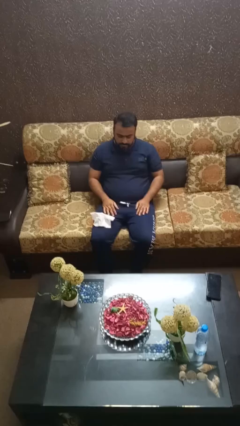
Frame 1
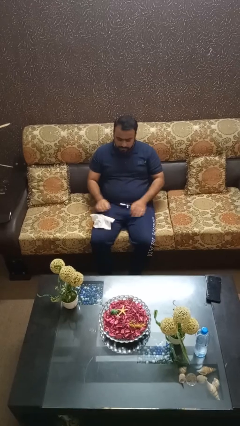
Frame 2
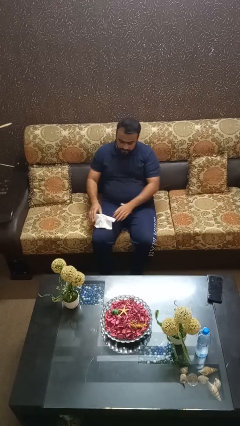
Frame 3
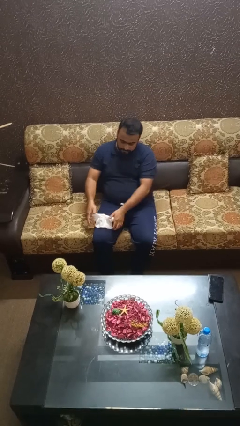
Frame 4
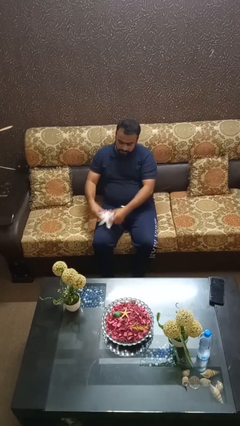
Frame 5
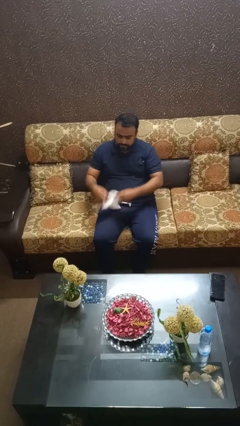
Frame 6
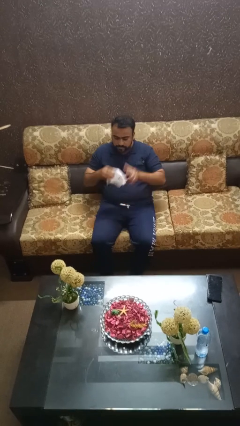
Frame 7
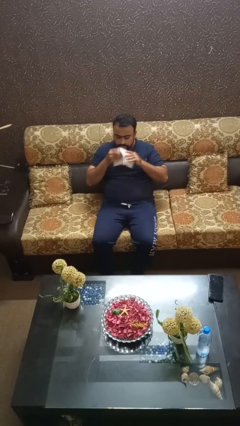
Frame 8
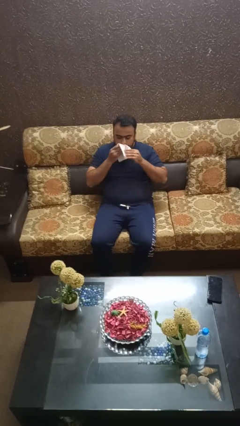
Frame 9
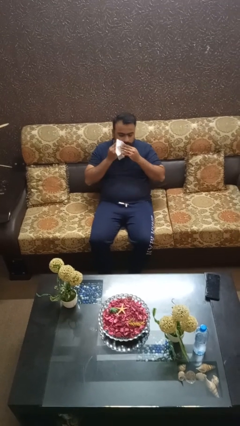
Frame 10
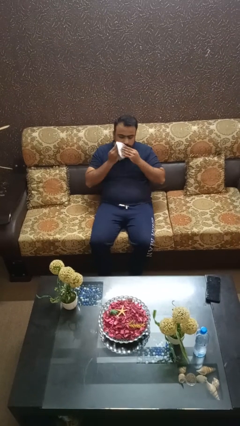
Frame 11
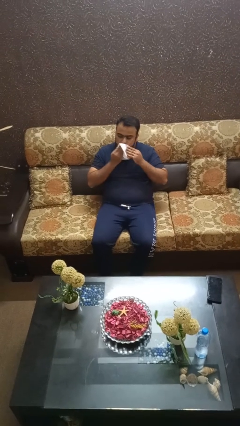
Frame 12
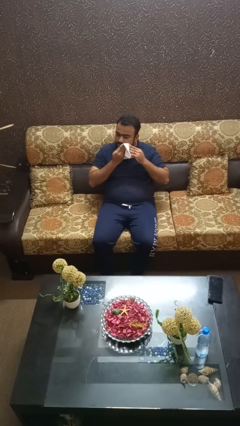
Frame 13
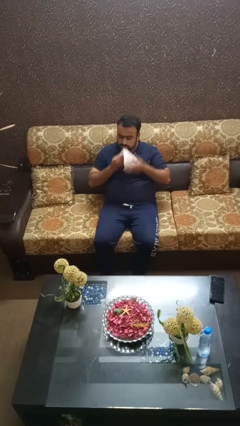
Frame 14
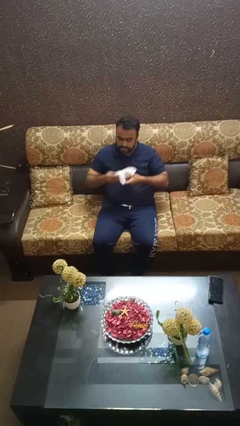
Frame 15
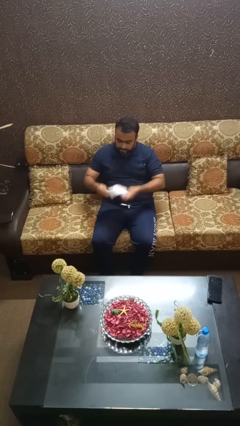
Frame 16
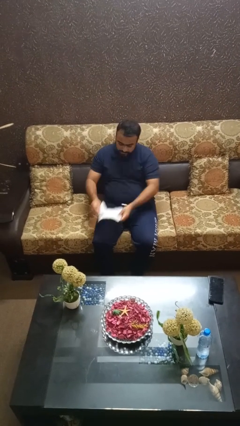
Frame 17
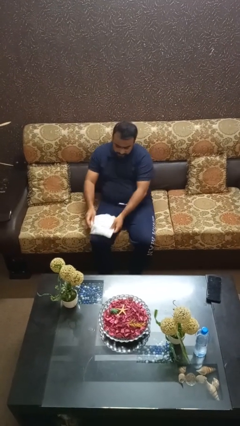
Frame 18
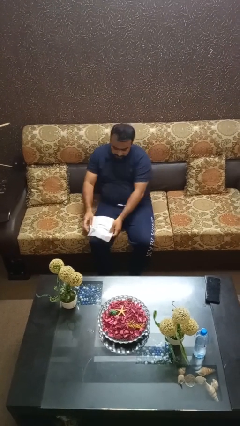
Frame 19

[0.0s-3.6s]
person wipes mouth with napkin

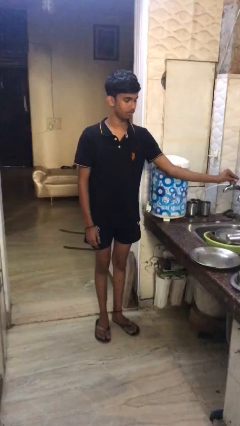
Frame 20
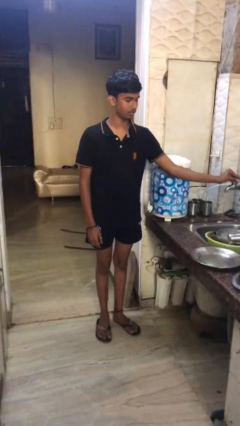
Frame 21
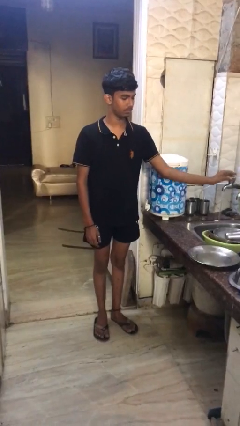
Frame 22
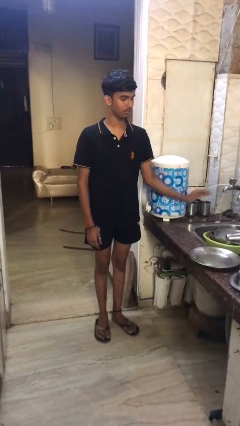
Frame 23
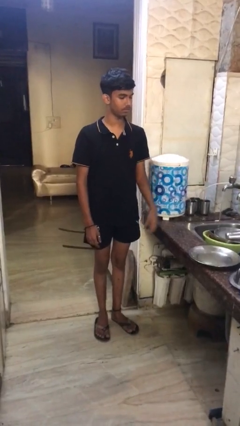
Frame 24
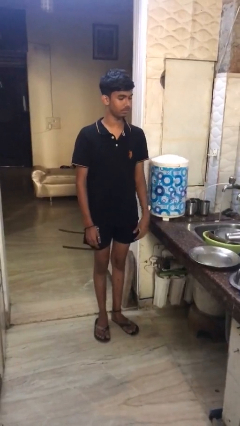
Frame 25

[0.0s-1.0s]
person turns on faucet

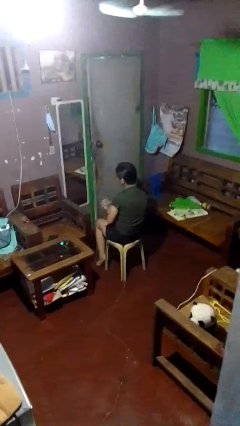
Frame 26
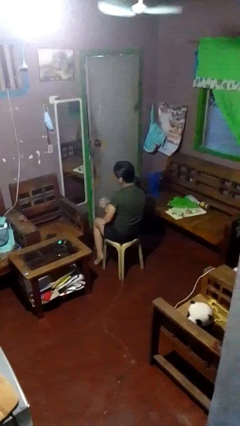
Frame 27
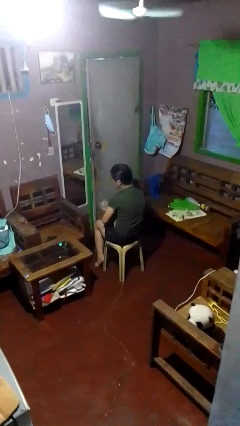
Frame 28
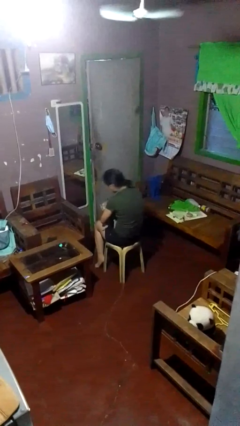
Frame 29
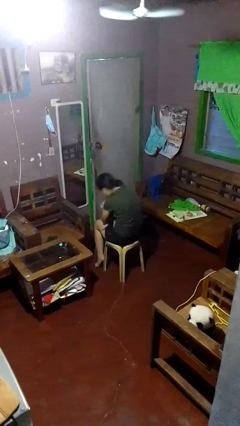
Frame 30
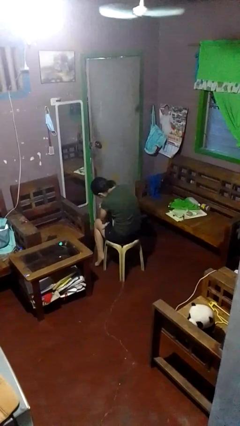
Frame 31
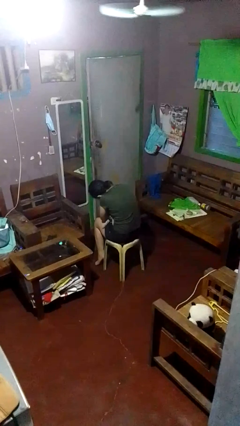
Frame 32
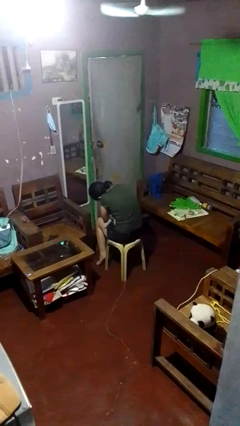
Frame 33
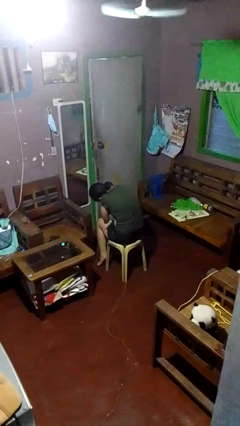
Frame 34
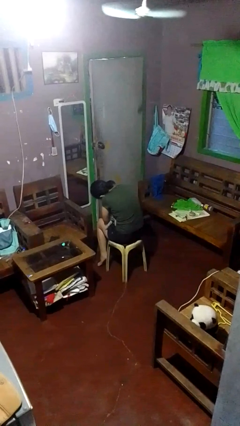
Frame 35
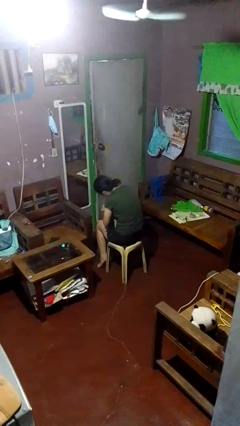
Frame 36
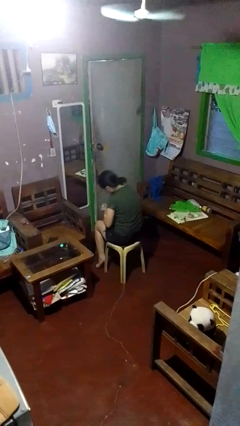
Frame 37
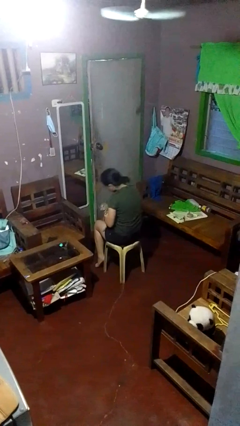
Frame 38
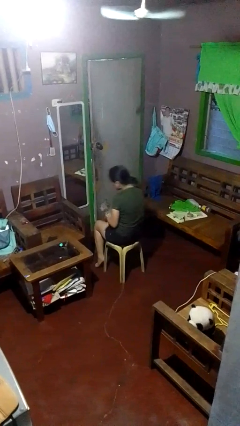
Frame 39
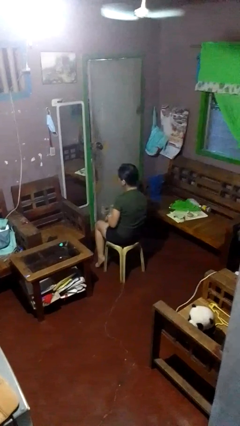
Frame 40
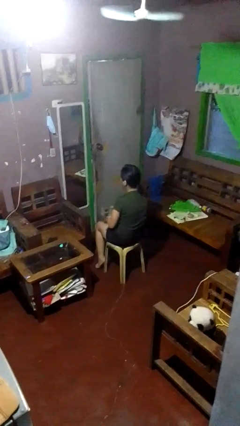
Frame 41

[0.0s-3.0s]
person hugs cat

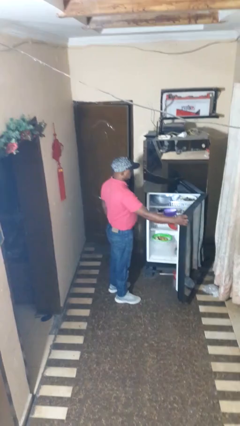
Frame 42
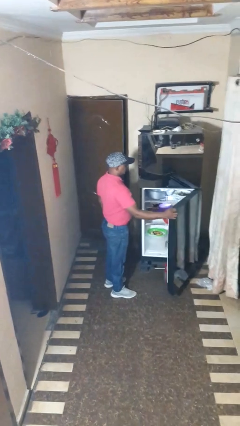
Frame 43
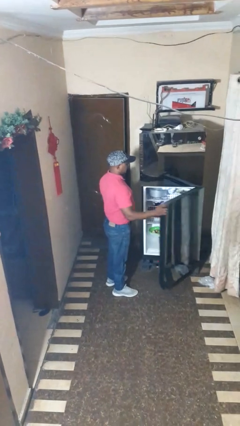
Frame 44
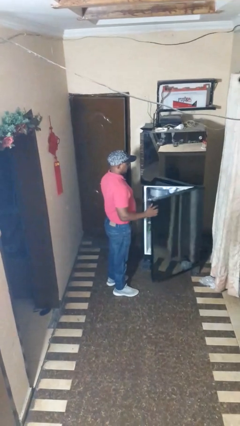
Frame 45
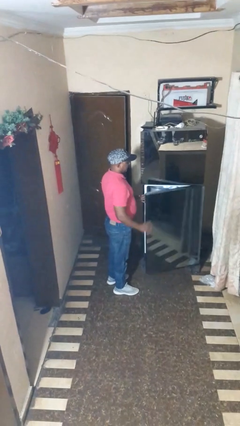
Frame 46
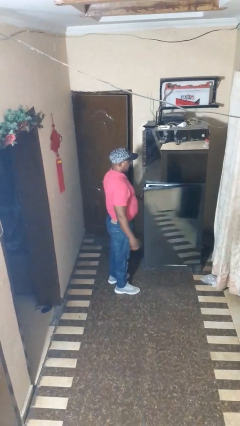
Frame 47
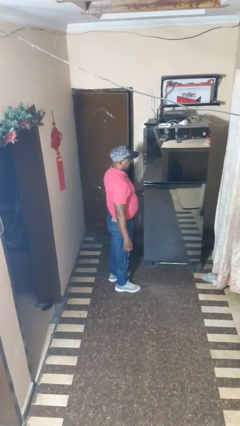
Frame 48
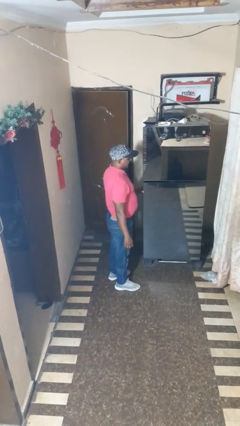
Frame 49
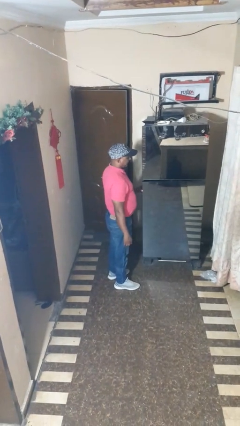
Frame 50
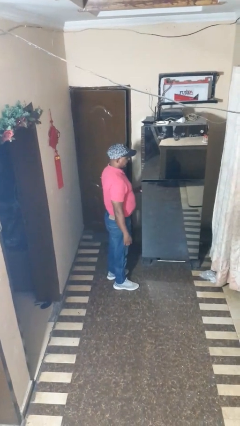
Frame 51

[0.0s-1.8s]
person closes refrigerator

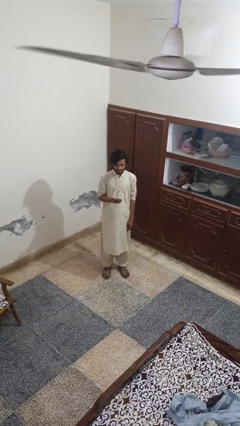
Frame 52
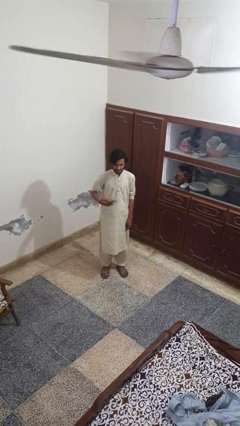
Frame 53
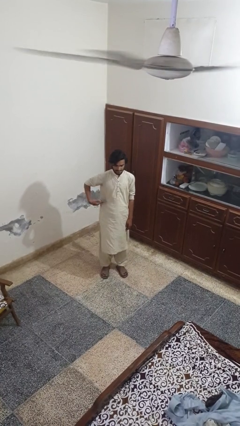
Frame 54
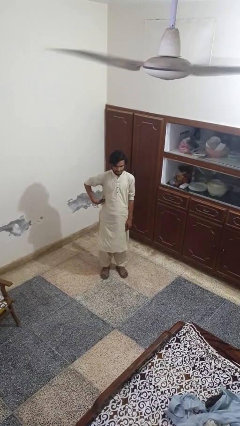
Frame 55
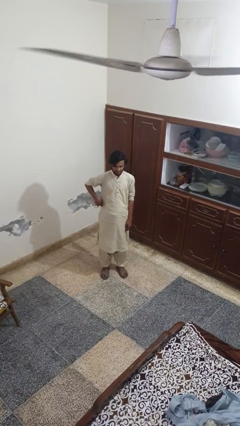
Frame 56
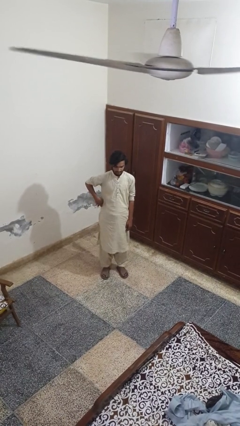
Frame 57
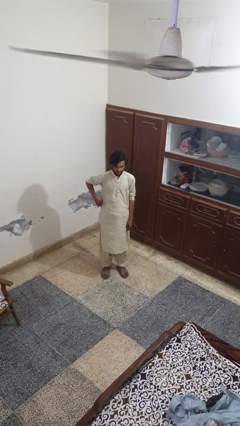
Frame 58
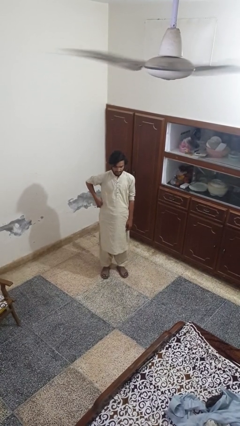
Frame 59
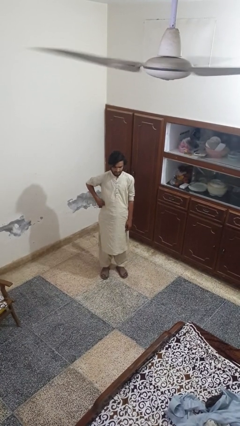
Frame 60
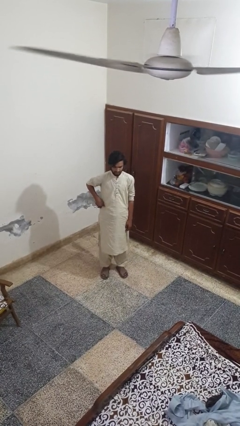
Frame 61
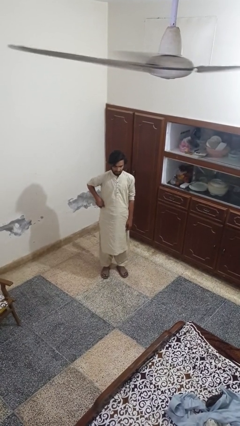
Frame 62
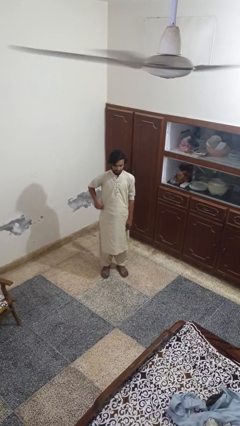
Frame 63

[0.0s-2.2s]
person puts phone into pocket

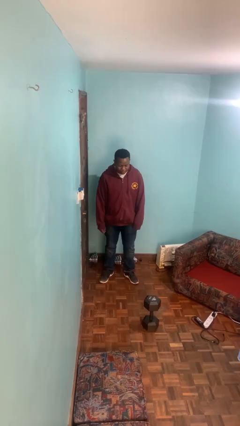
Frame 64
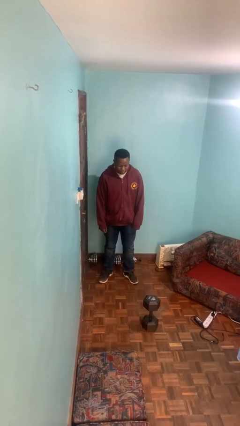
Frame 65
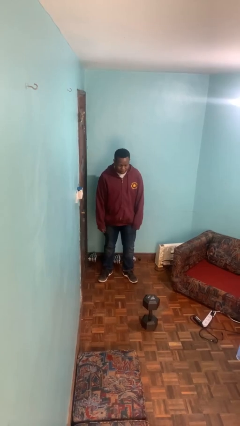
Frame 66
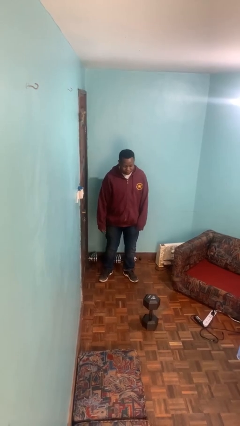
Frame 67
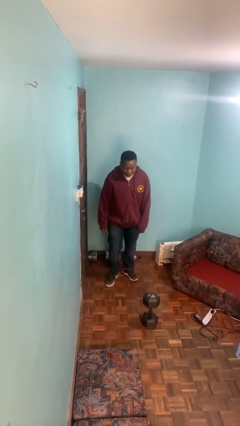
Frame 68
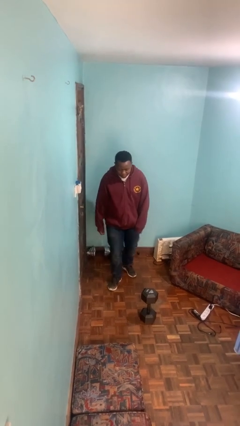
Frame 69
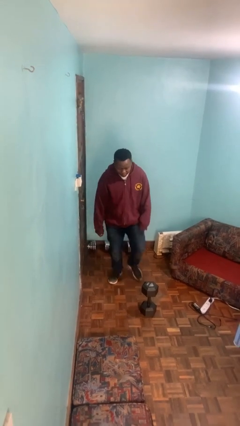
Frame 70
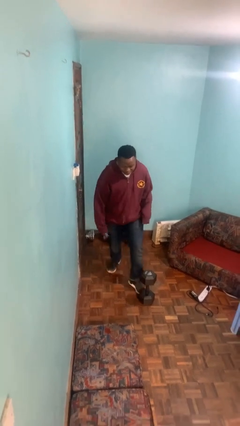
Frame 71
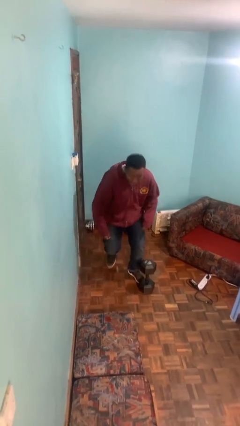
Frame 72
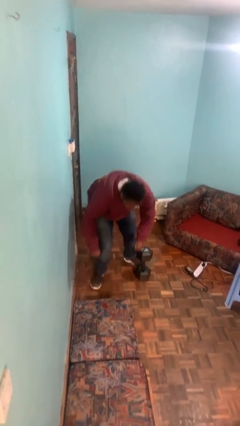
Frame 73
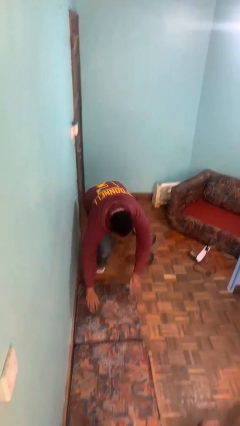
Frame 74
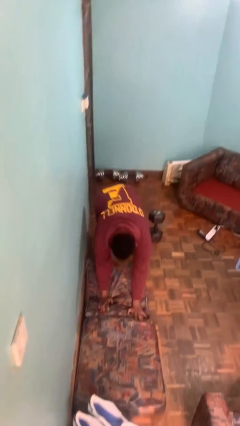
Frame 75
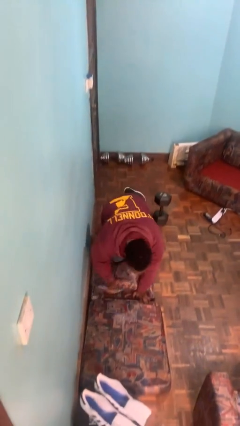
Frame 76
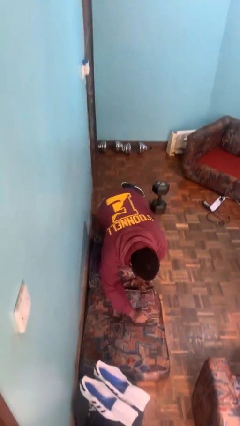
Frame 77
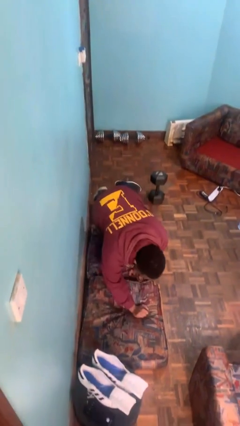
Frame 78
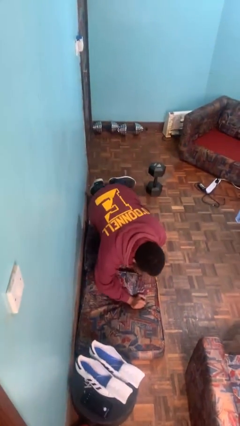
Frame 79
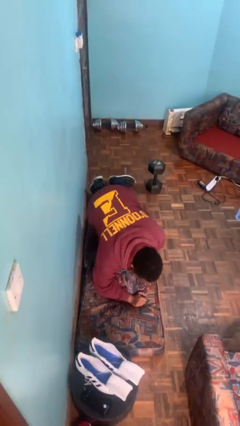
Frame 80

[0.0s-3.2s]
person trips on object on floor

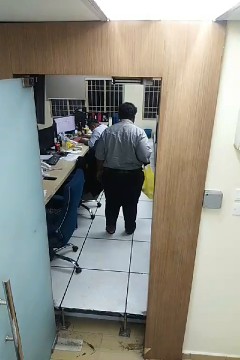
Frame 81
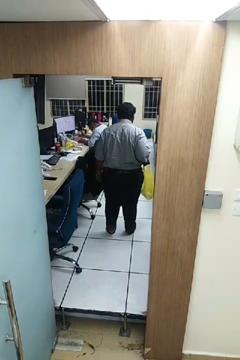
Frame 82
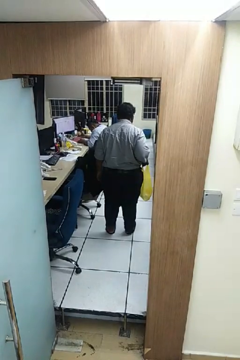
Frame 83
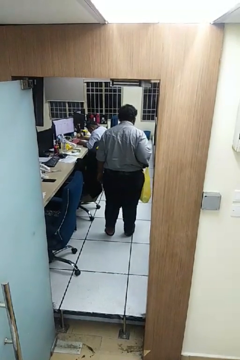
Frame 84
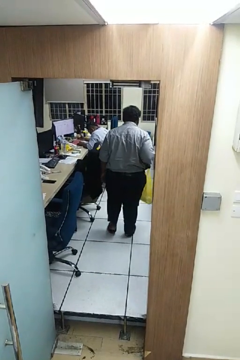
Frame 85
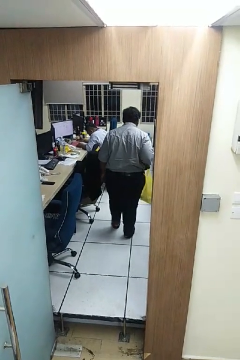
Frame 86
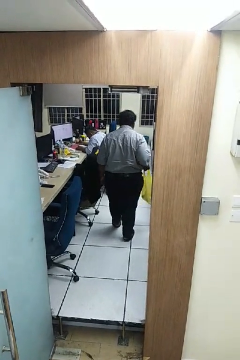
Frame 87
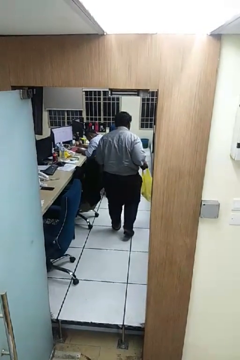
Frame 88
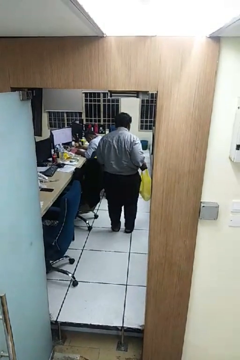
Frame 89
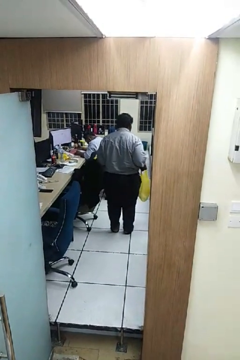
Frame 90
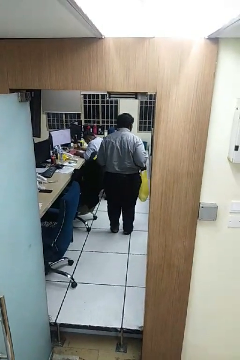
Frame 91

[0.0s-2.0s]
person carries groceries

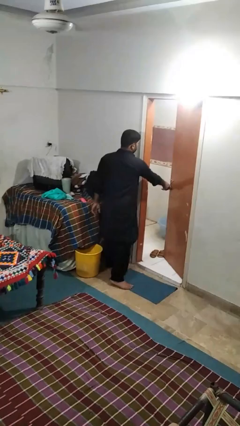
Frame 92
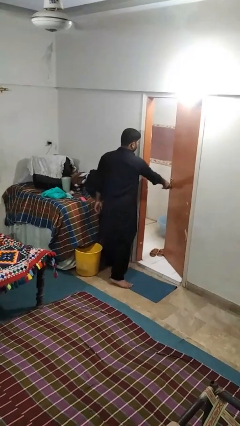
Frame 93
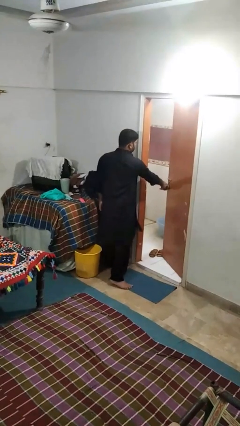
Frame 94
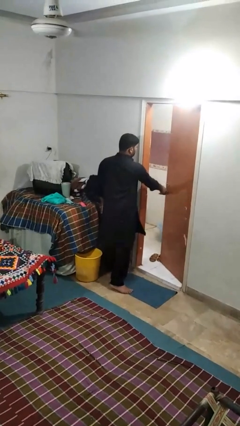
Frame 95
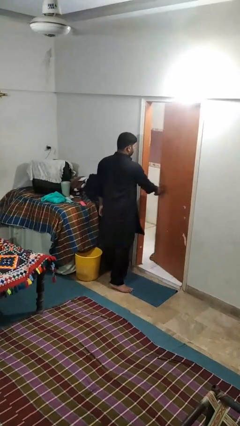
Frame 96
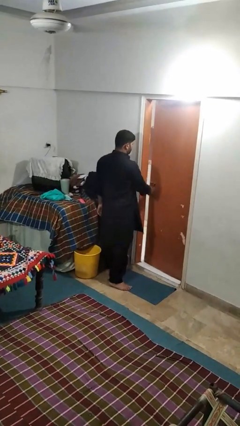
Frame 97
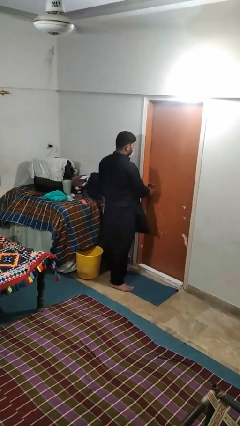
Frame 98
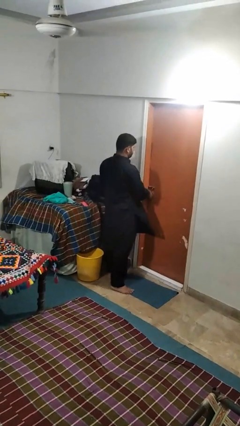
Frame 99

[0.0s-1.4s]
person closes facility door
